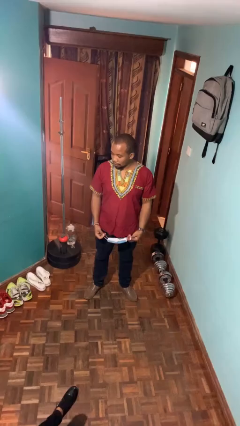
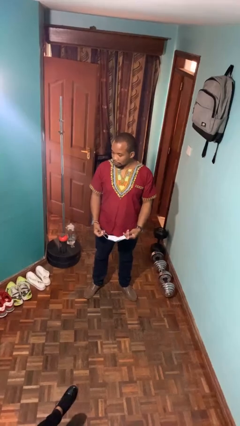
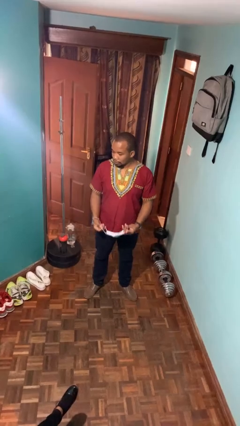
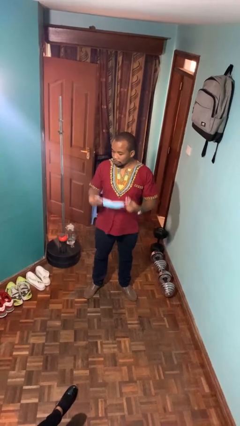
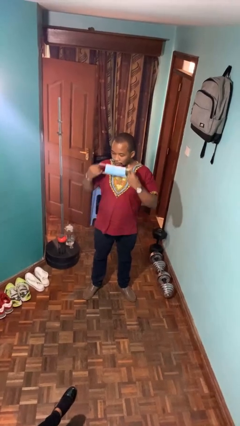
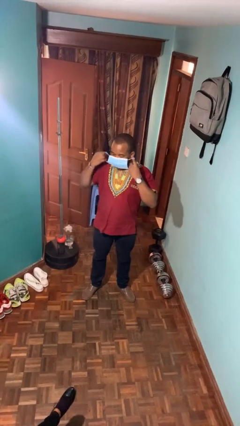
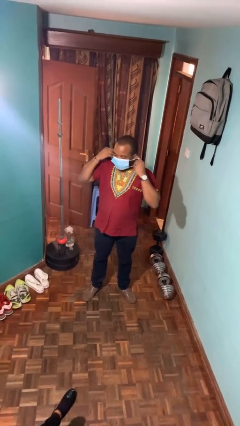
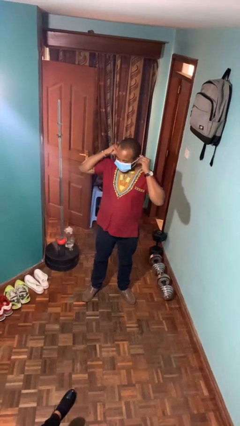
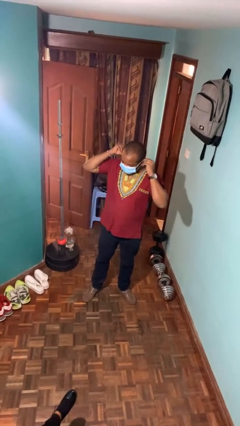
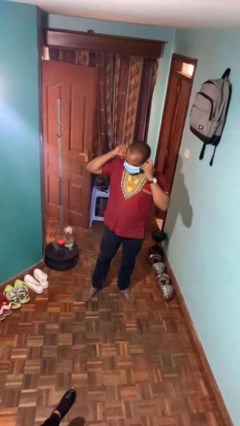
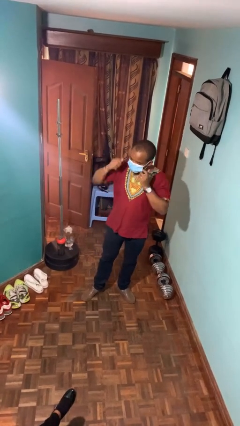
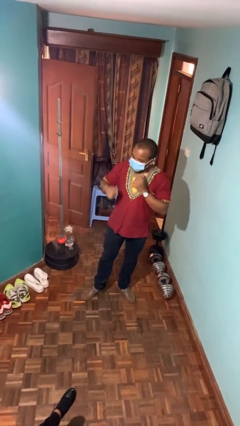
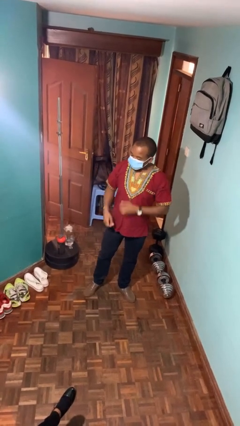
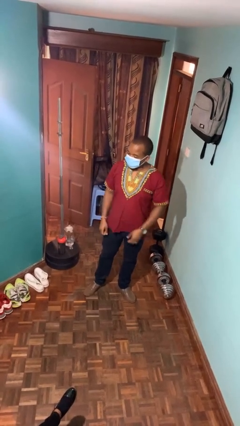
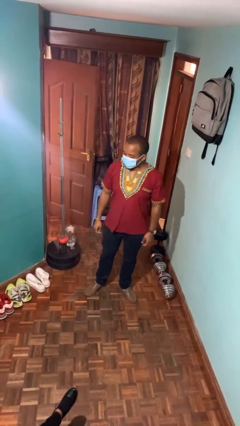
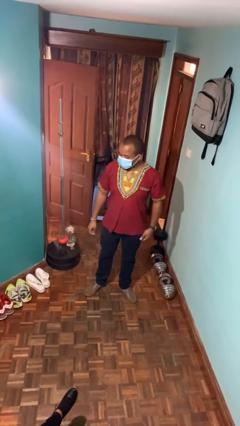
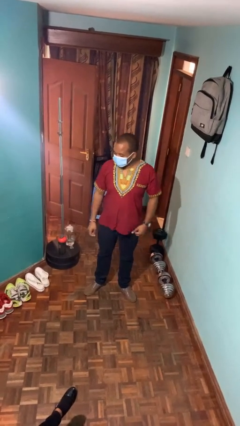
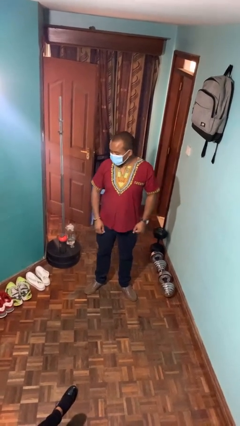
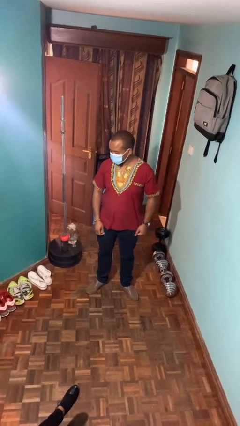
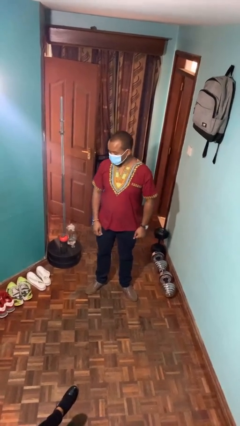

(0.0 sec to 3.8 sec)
person puts on facemask

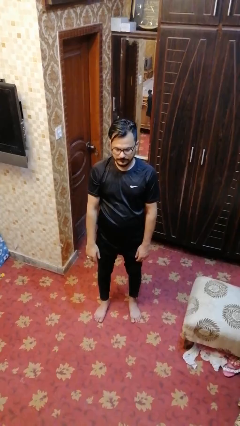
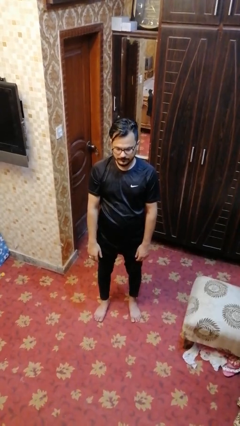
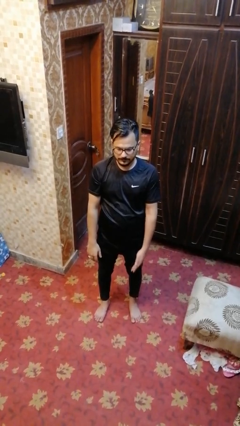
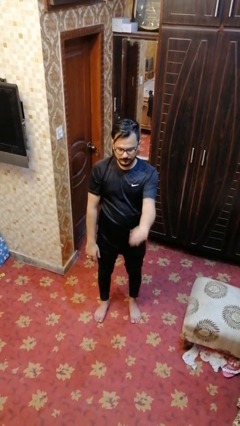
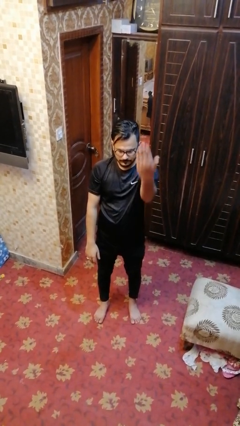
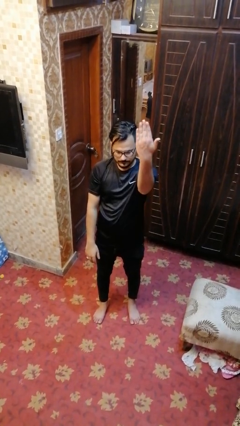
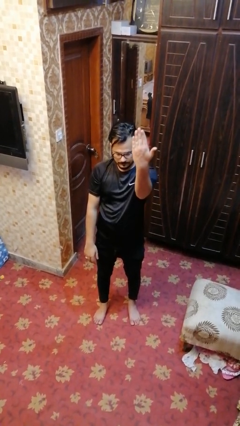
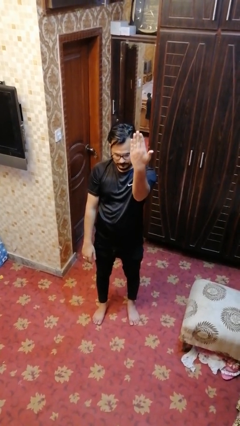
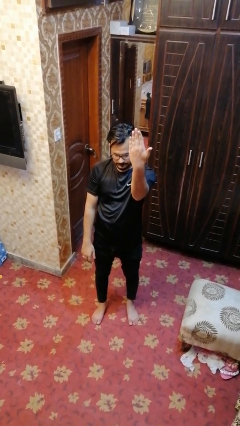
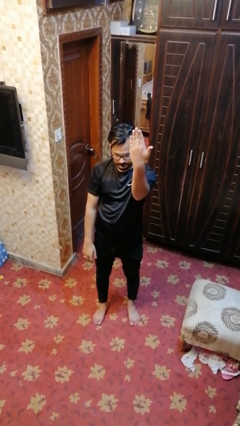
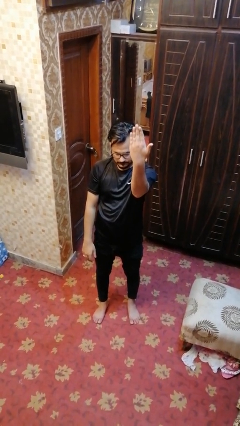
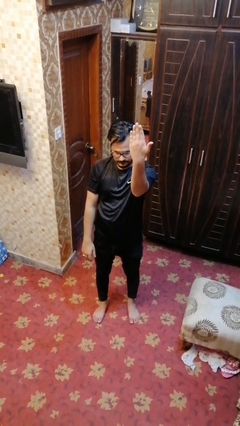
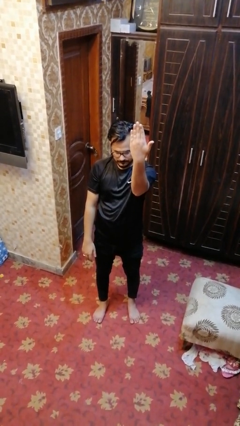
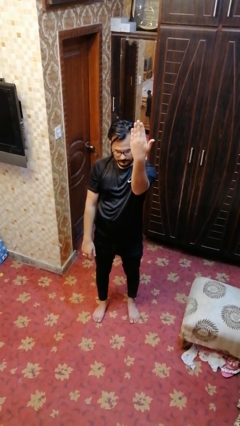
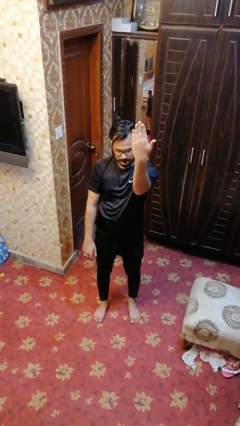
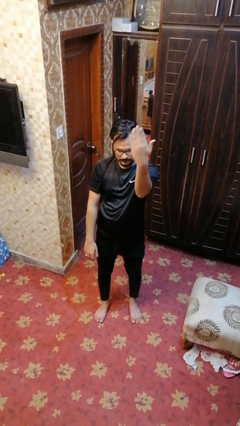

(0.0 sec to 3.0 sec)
person gestures number five

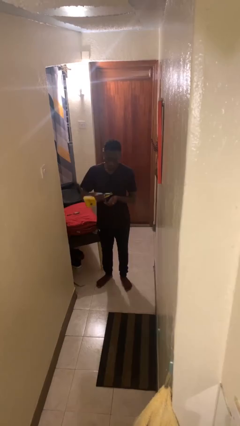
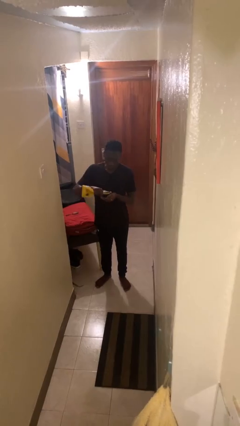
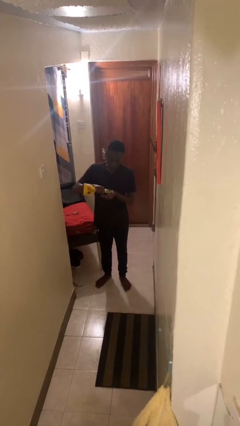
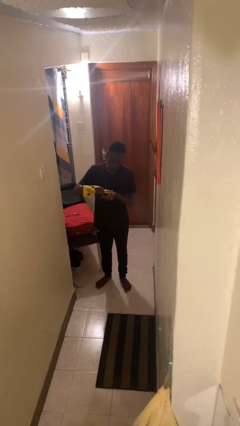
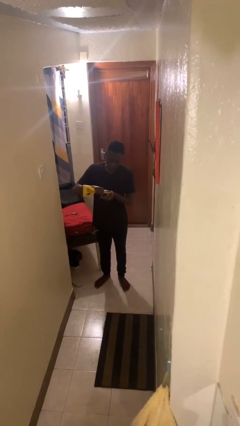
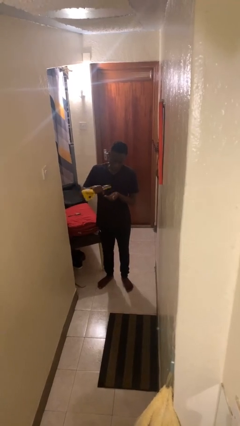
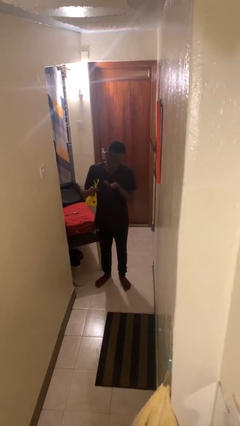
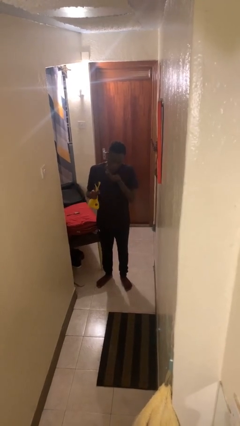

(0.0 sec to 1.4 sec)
person eats snack from bag

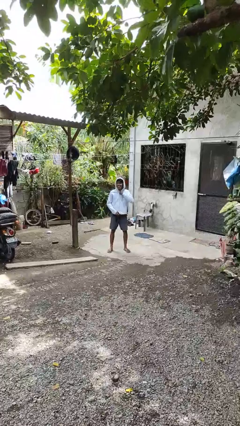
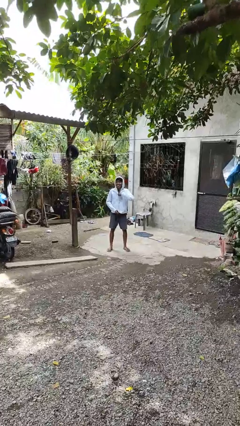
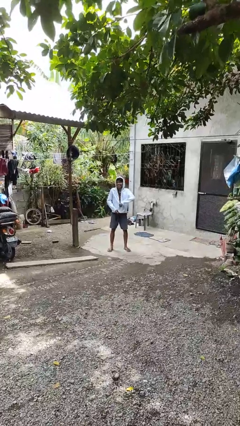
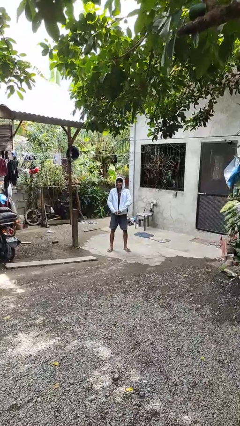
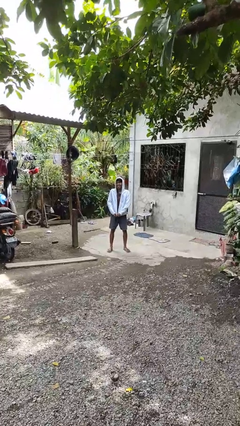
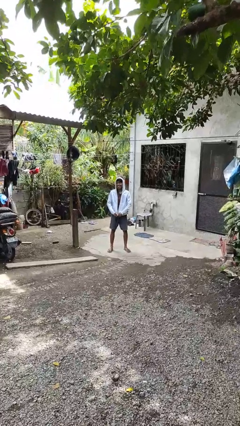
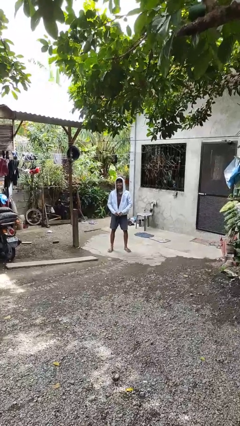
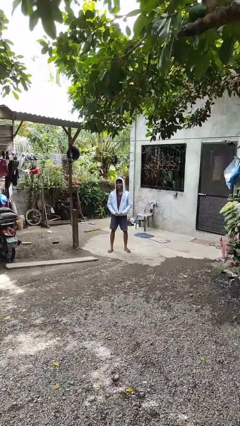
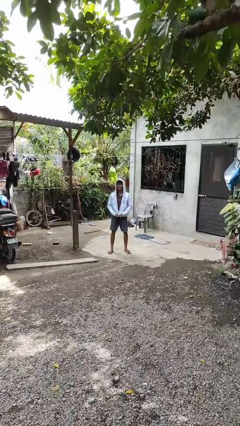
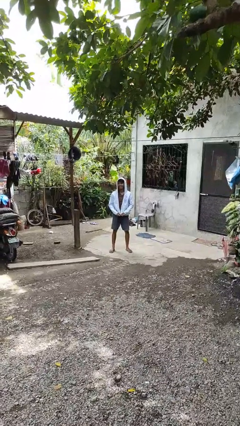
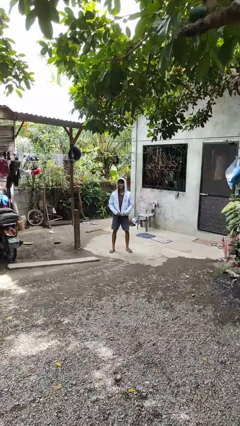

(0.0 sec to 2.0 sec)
person unzips jacket

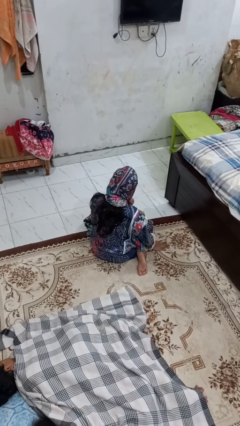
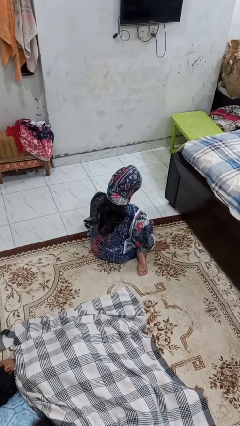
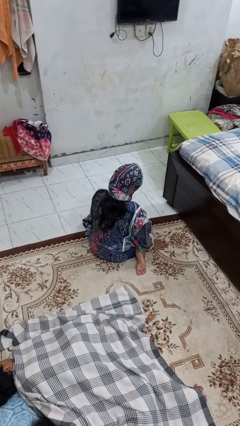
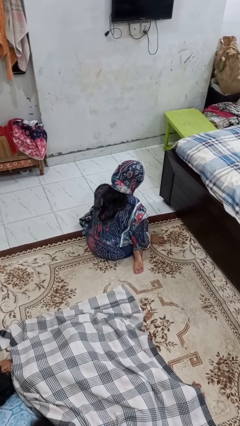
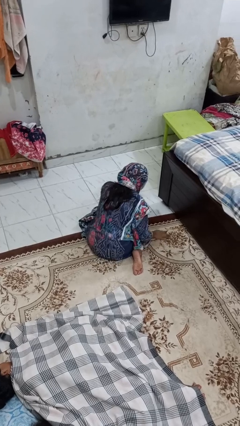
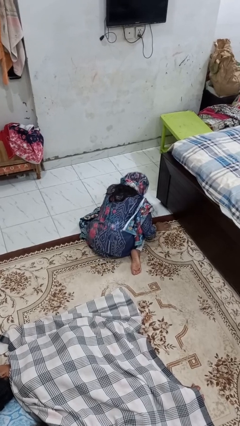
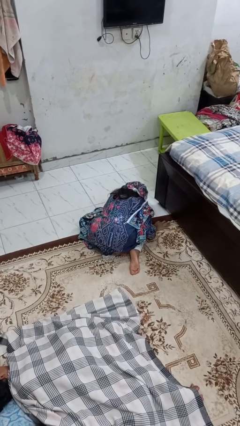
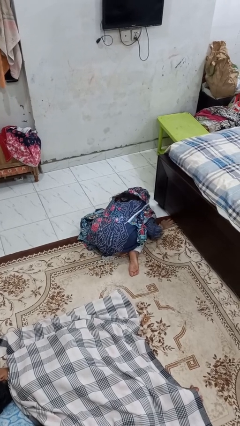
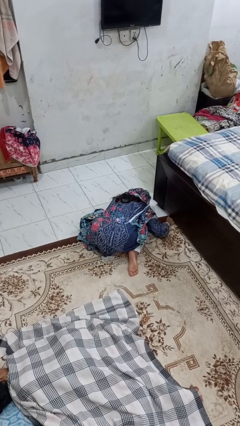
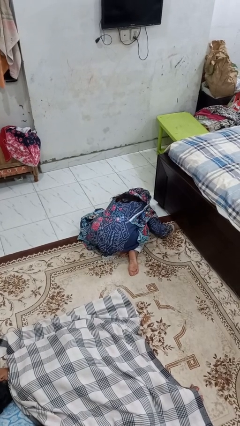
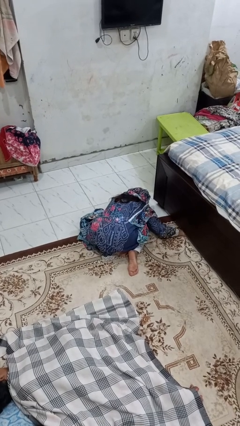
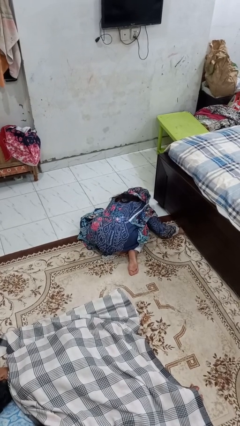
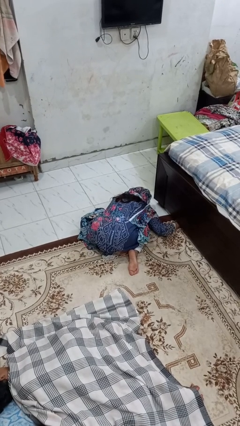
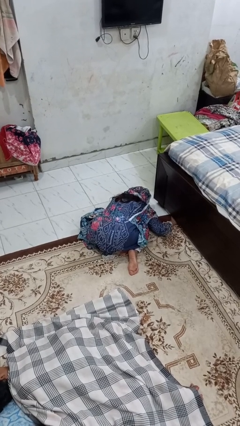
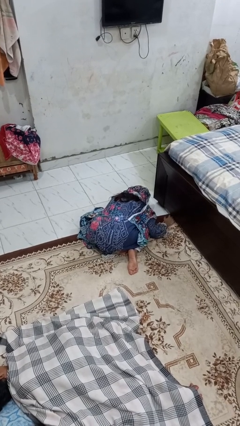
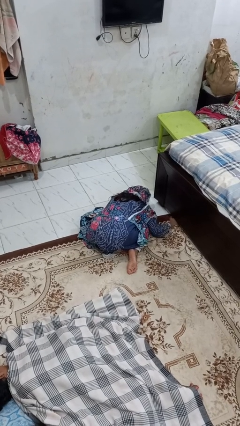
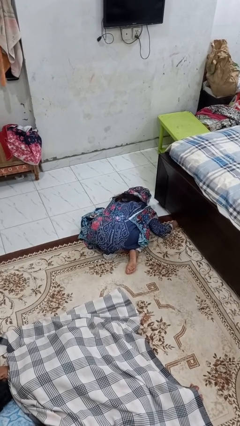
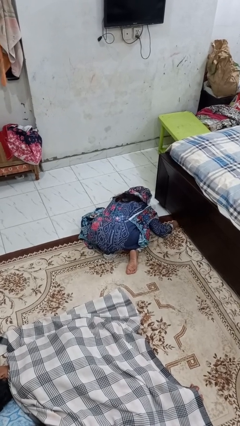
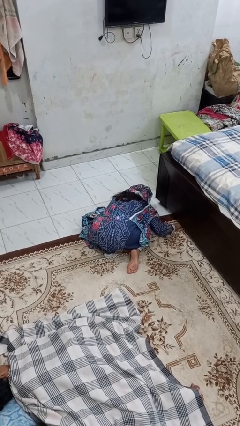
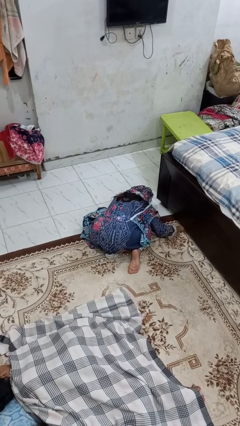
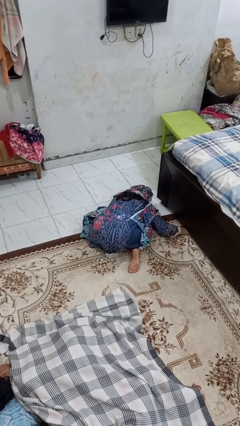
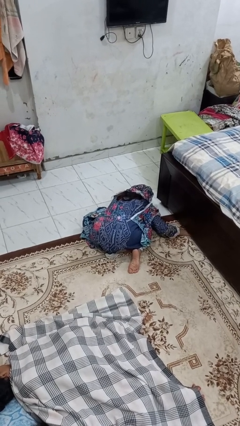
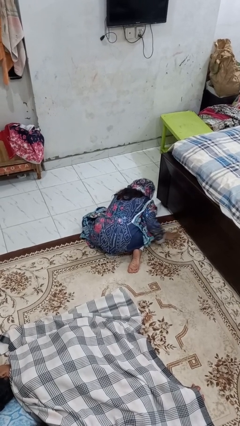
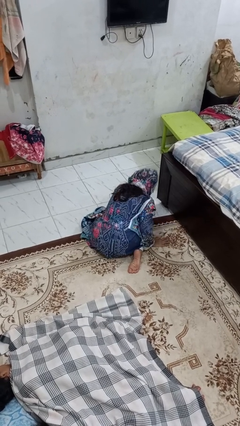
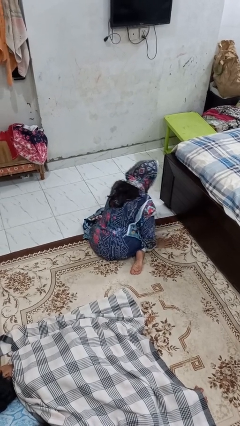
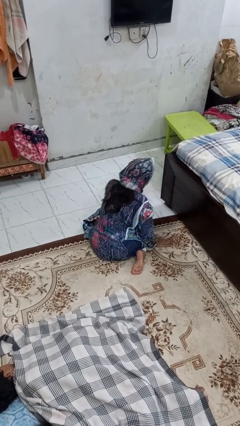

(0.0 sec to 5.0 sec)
person searches under bed

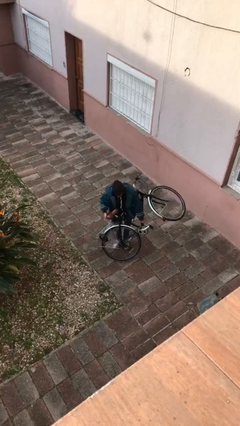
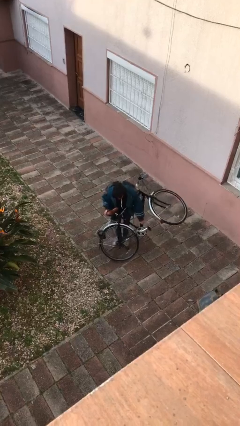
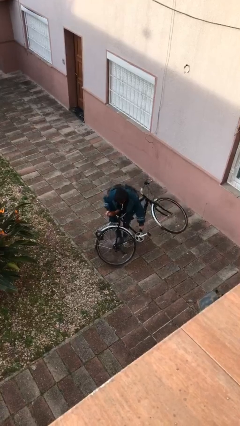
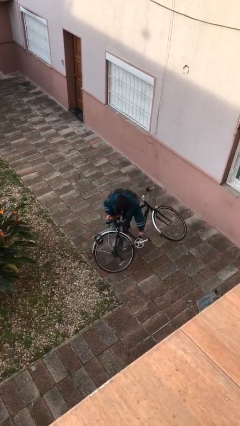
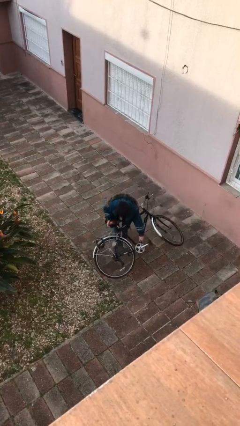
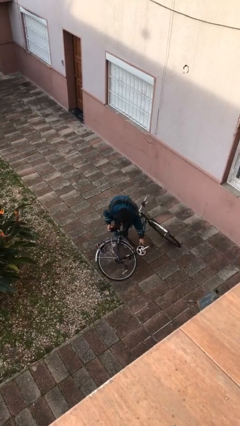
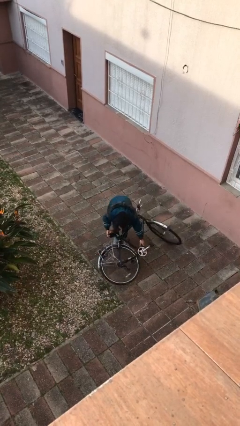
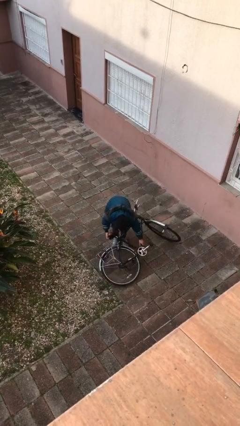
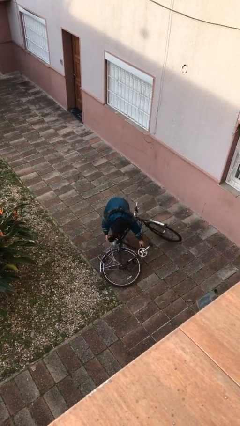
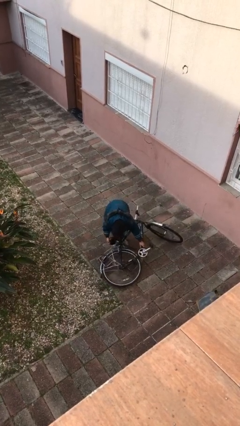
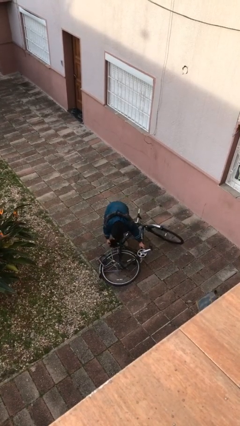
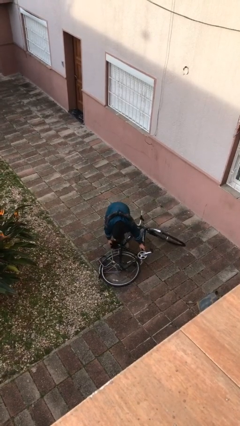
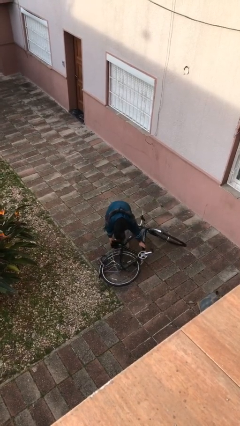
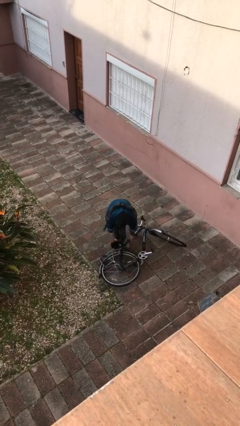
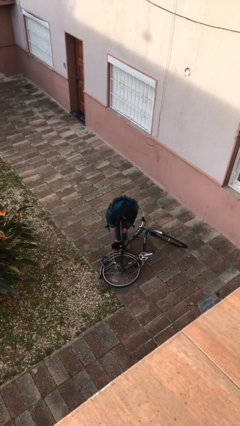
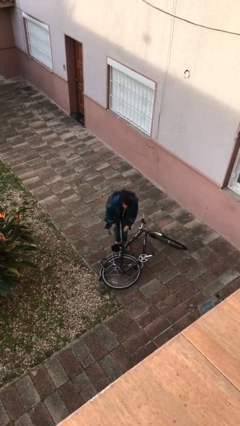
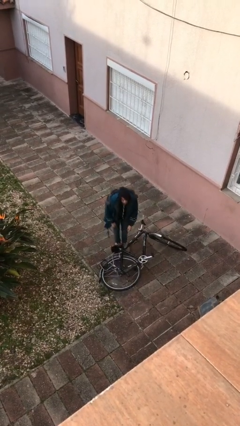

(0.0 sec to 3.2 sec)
person puts down object on floor
